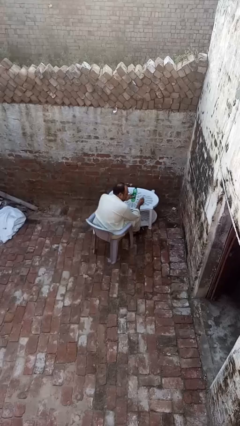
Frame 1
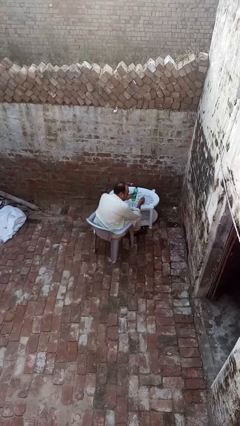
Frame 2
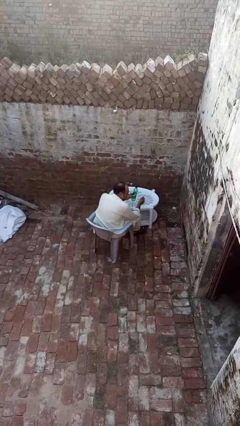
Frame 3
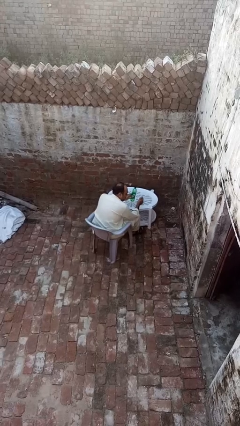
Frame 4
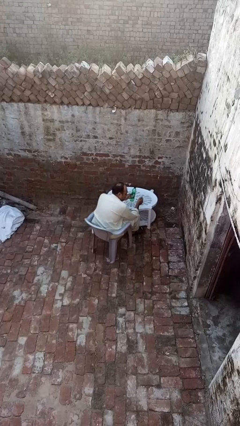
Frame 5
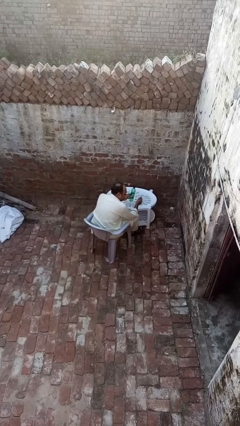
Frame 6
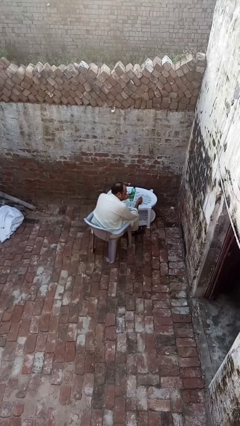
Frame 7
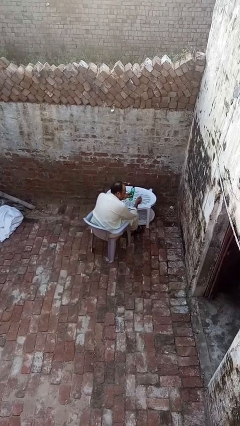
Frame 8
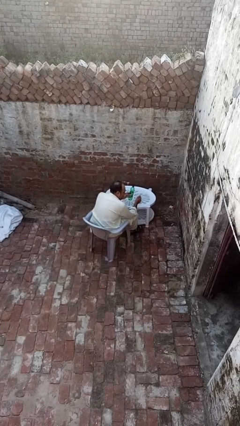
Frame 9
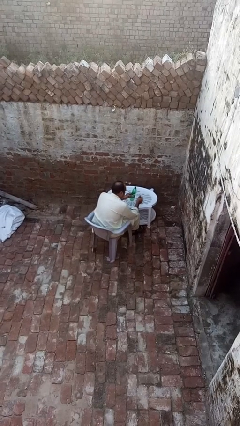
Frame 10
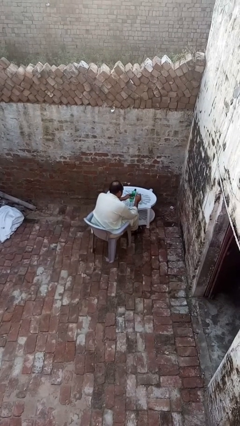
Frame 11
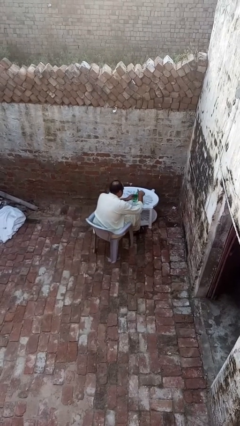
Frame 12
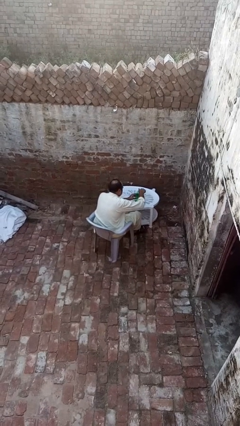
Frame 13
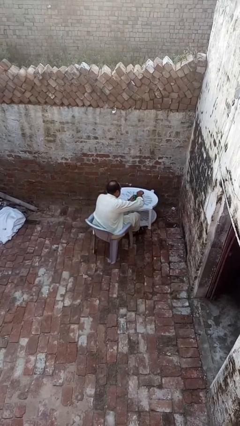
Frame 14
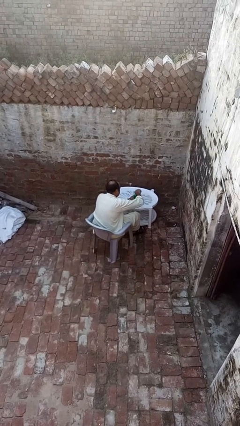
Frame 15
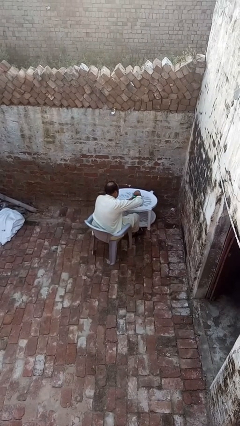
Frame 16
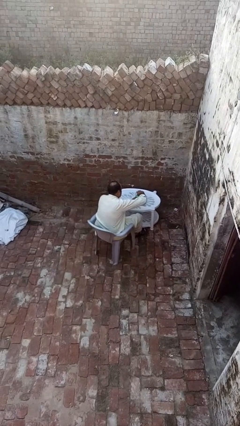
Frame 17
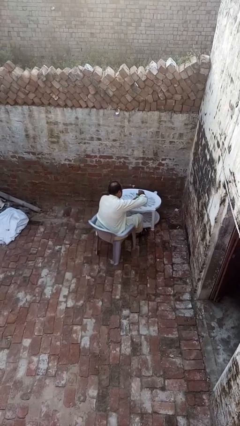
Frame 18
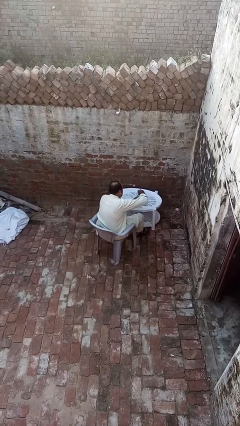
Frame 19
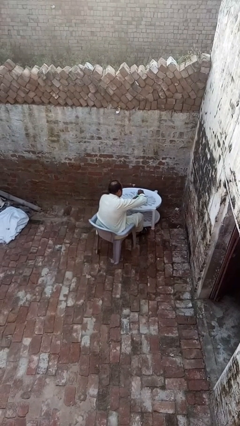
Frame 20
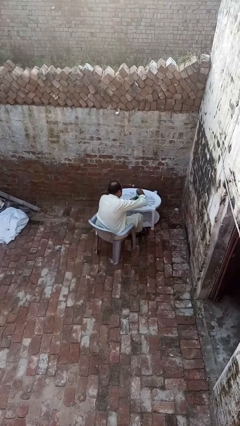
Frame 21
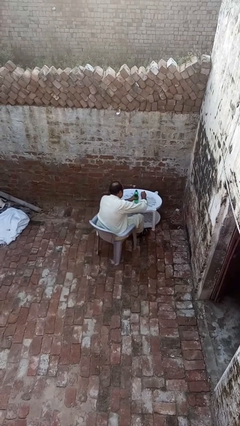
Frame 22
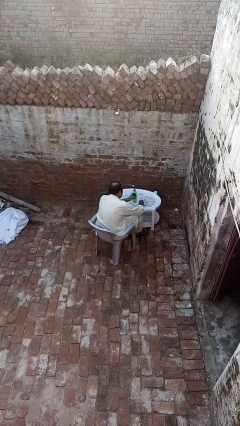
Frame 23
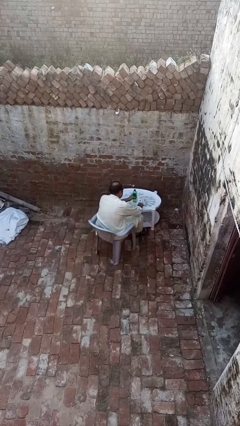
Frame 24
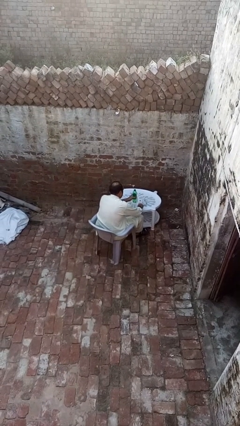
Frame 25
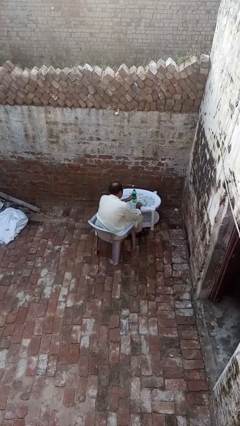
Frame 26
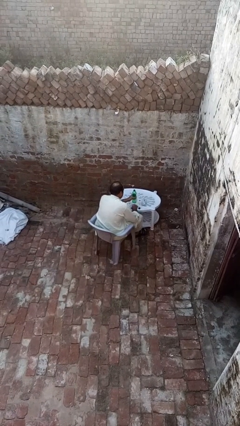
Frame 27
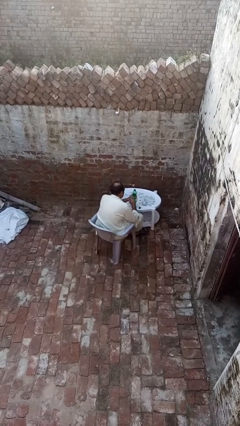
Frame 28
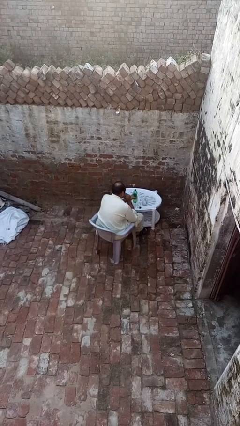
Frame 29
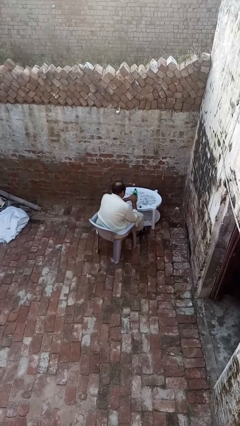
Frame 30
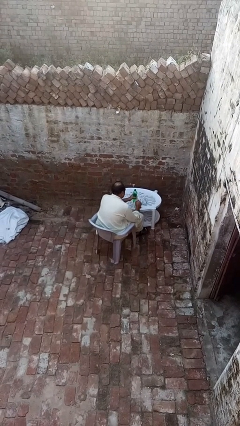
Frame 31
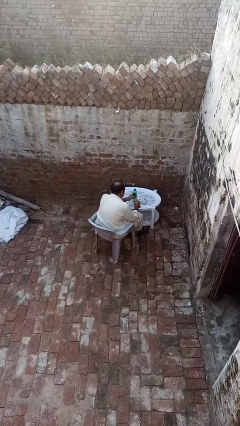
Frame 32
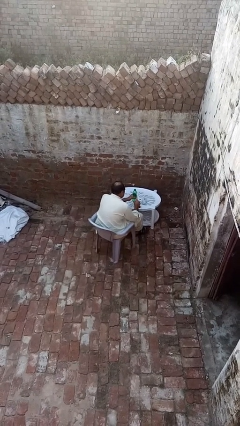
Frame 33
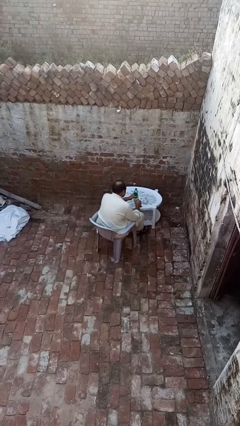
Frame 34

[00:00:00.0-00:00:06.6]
person unscrews lid from bottle

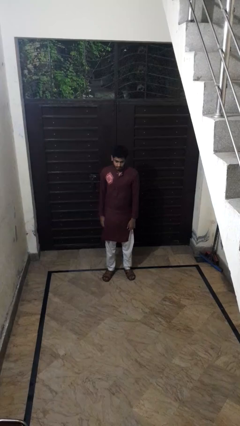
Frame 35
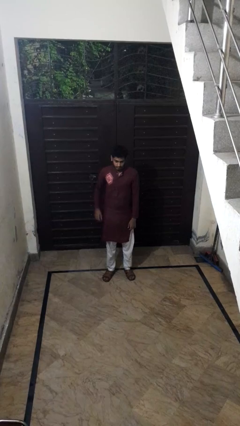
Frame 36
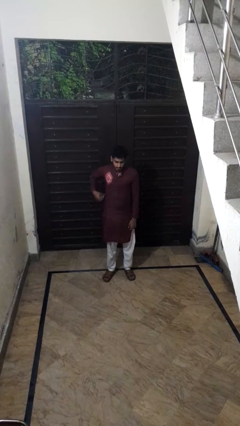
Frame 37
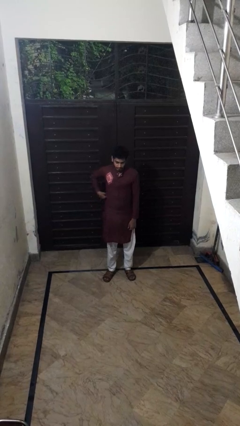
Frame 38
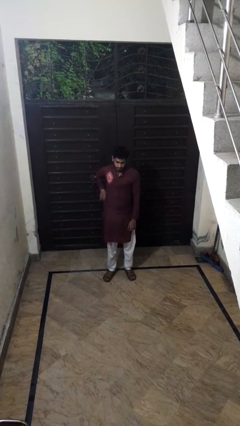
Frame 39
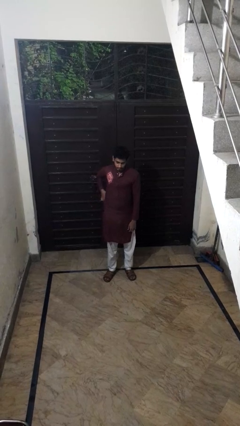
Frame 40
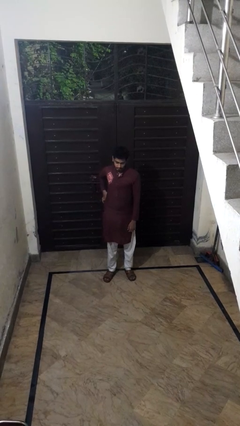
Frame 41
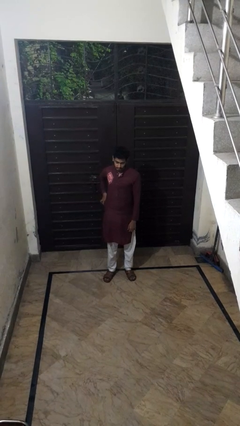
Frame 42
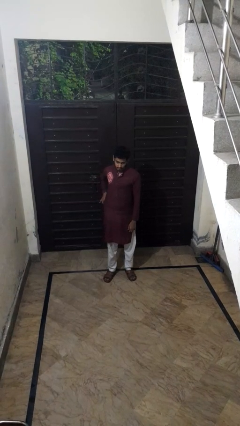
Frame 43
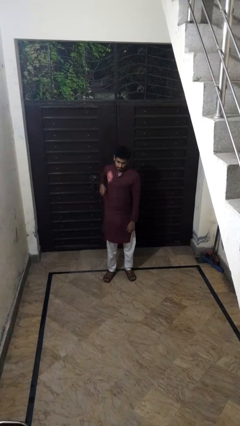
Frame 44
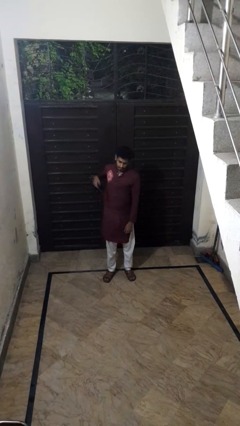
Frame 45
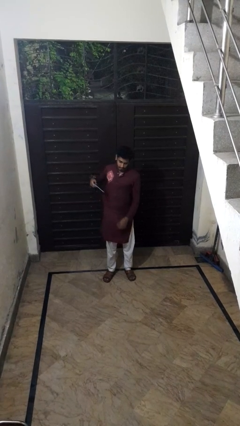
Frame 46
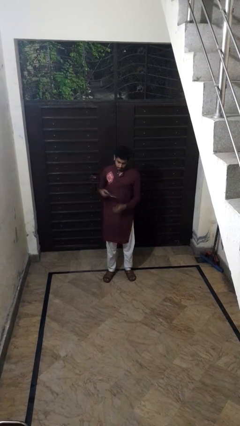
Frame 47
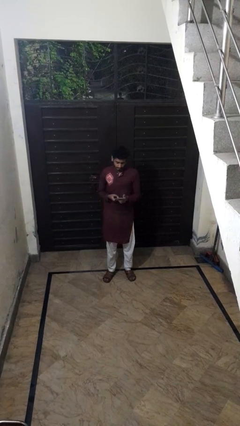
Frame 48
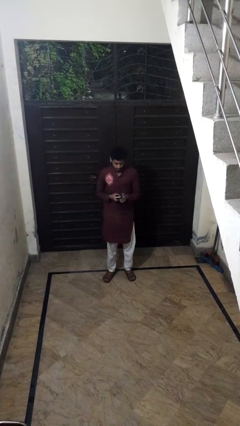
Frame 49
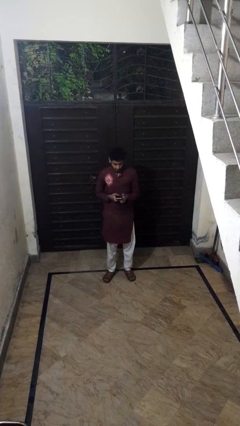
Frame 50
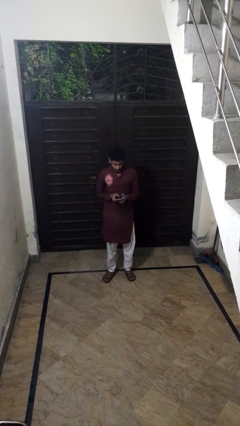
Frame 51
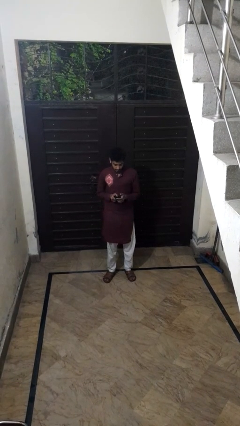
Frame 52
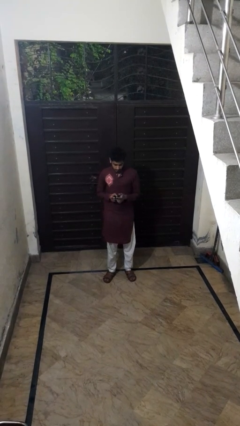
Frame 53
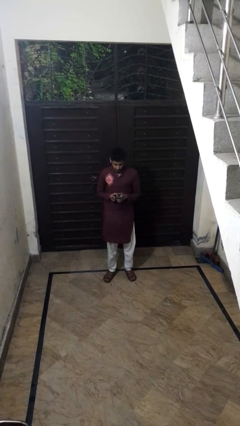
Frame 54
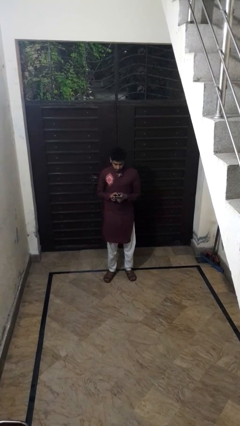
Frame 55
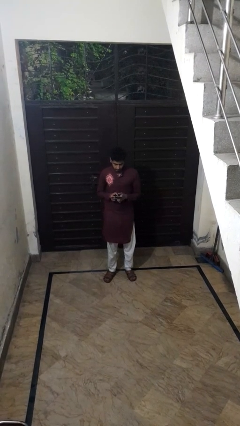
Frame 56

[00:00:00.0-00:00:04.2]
person takes phone from pocket

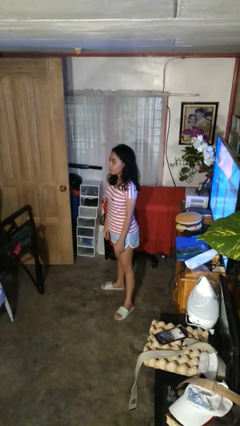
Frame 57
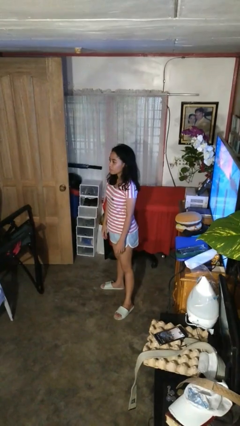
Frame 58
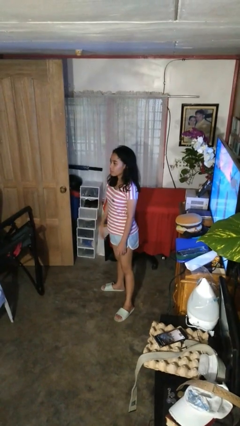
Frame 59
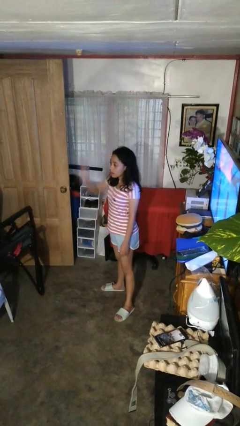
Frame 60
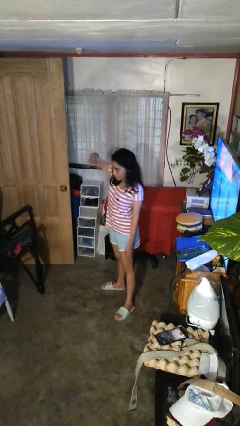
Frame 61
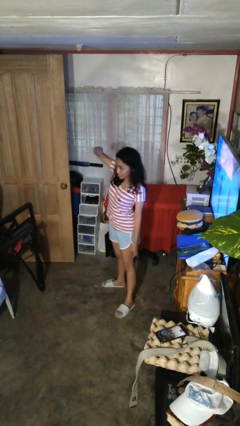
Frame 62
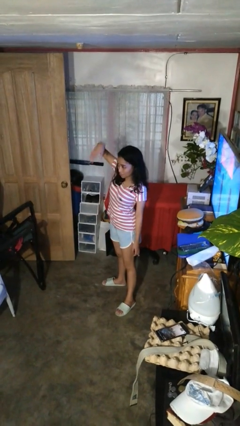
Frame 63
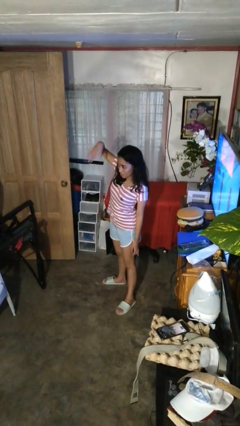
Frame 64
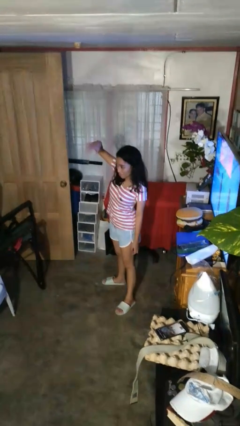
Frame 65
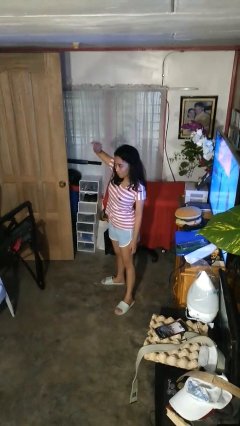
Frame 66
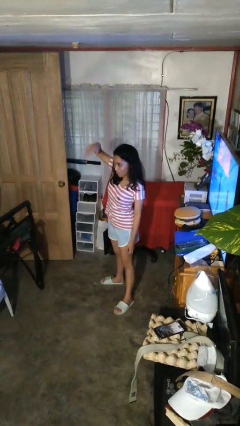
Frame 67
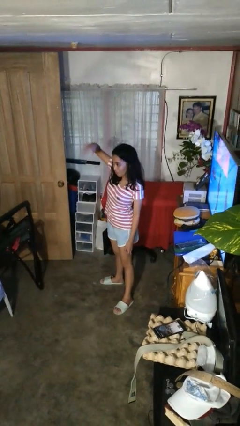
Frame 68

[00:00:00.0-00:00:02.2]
person gestures come here

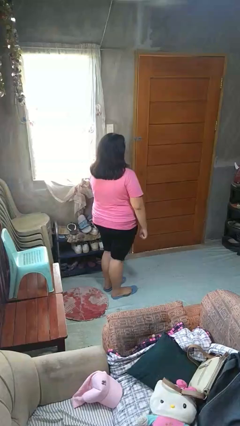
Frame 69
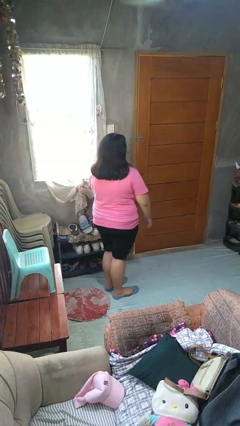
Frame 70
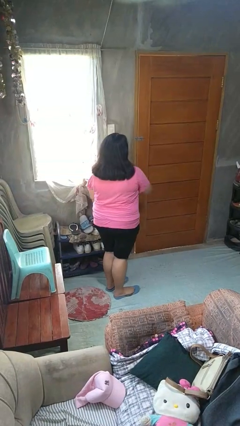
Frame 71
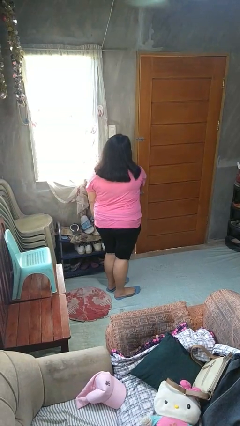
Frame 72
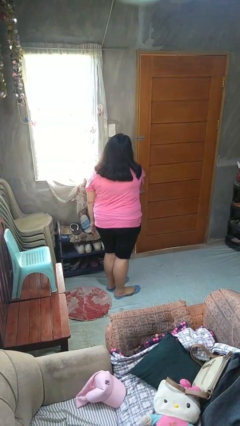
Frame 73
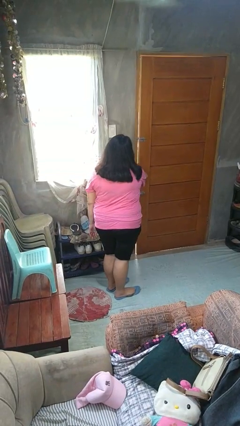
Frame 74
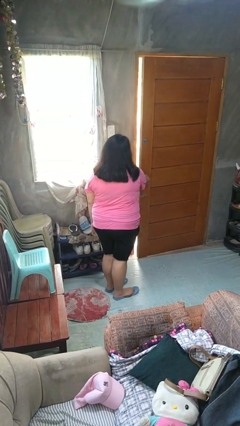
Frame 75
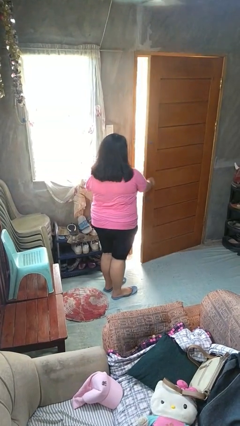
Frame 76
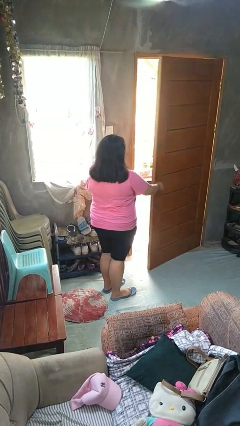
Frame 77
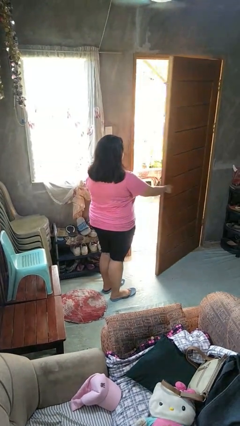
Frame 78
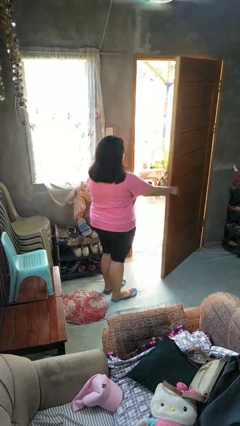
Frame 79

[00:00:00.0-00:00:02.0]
person opens facility door

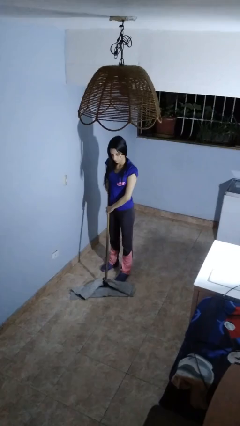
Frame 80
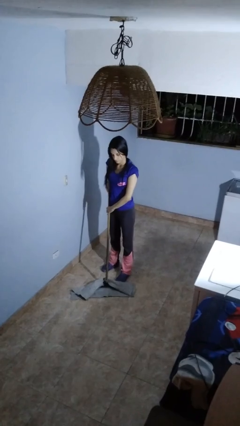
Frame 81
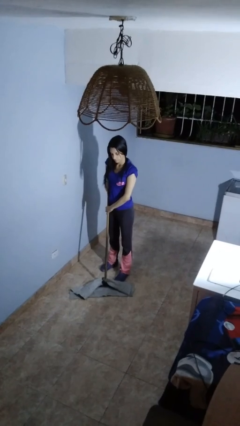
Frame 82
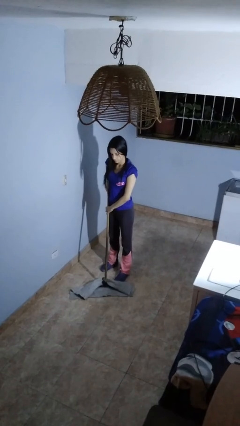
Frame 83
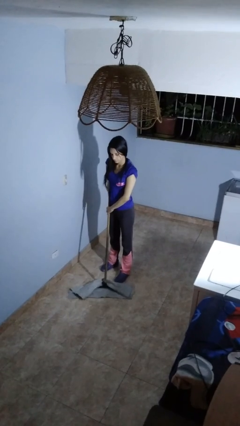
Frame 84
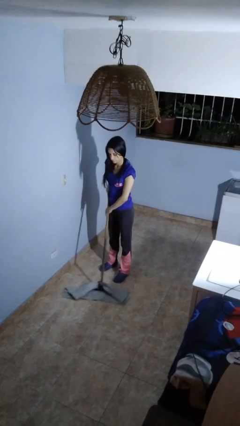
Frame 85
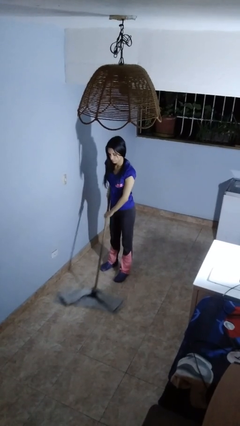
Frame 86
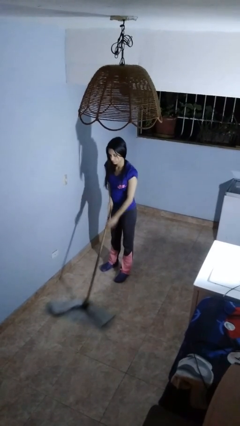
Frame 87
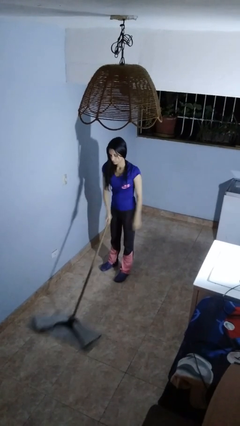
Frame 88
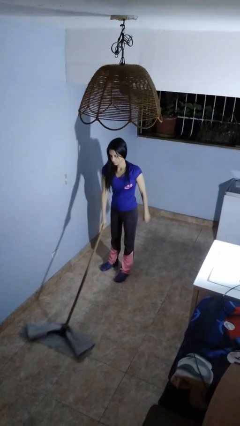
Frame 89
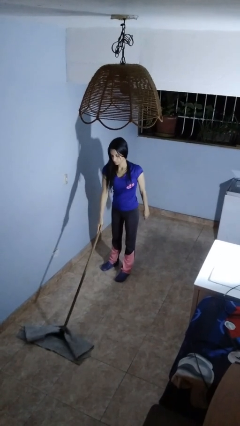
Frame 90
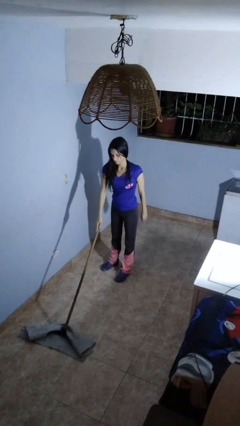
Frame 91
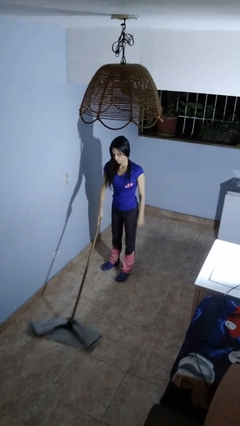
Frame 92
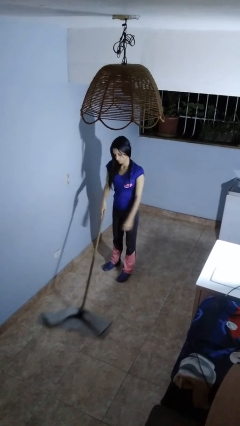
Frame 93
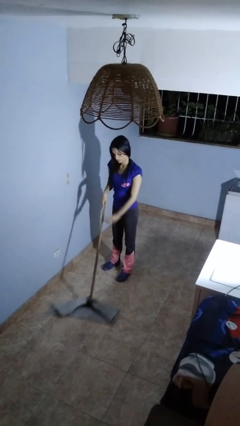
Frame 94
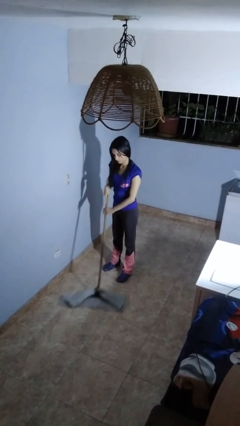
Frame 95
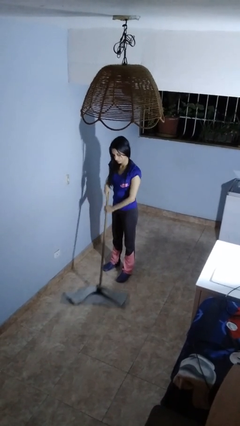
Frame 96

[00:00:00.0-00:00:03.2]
person mops
